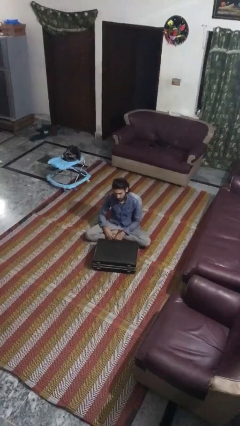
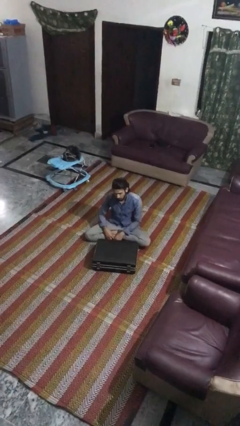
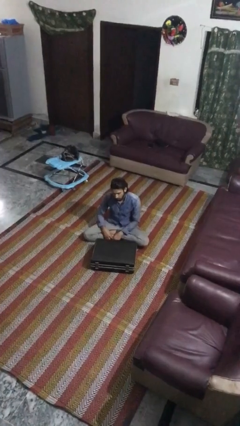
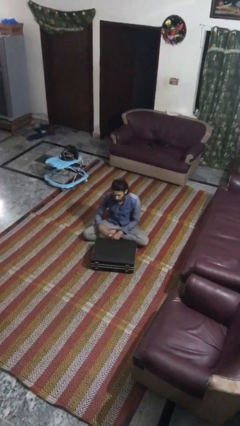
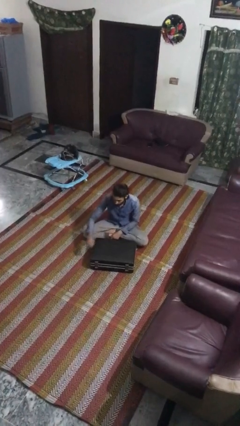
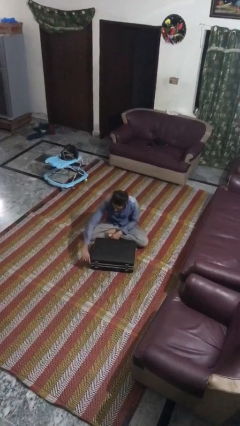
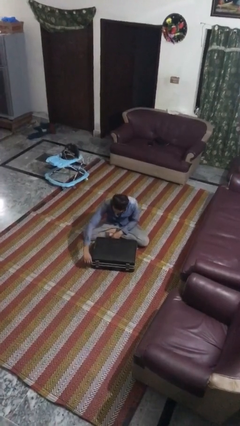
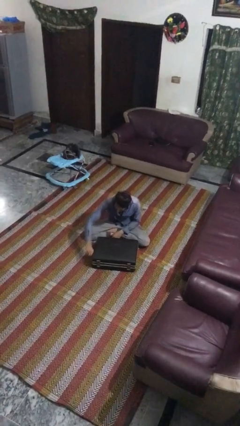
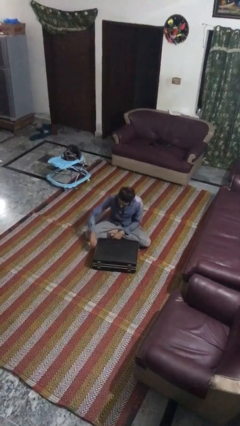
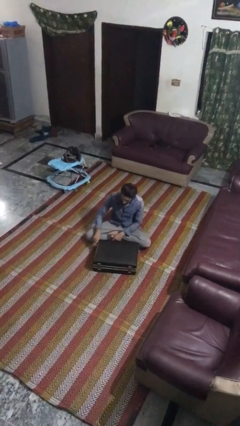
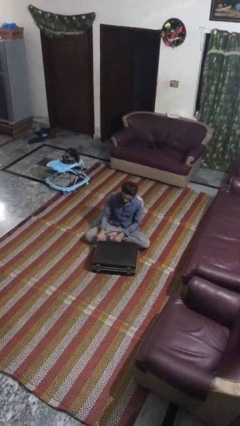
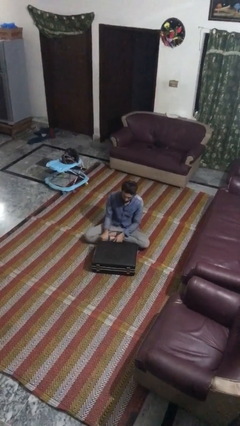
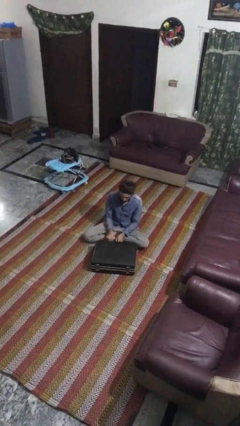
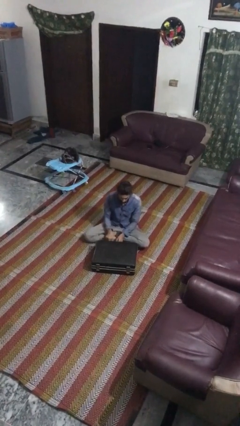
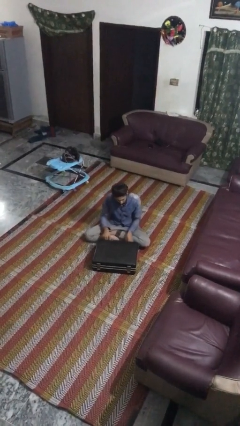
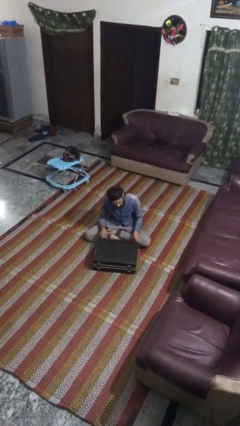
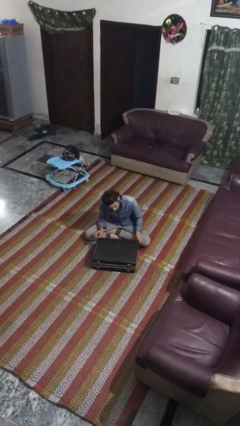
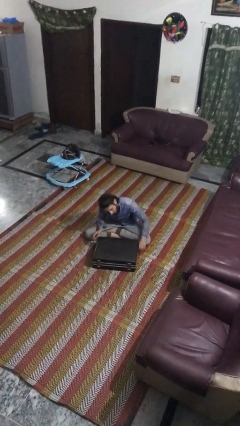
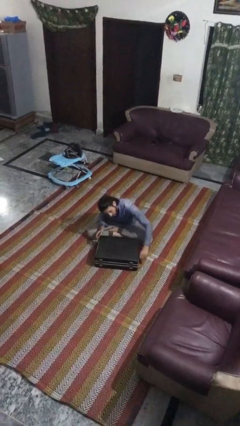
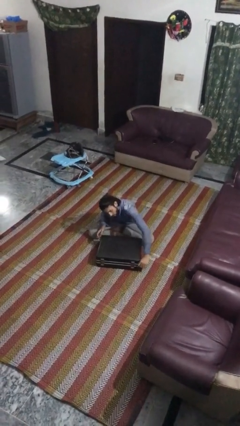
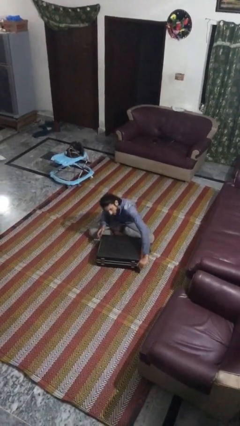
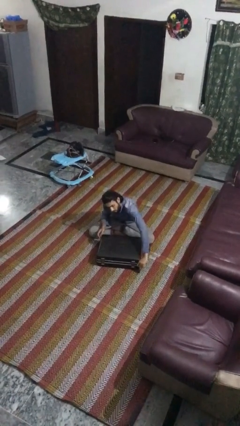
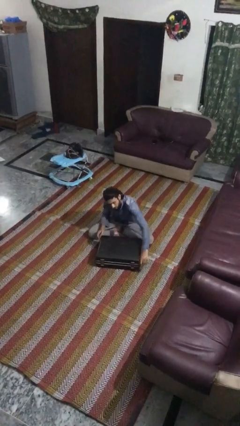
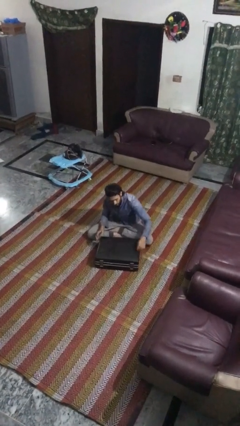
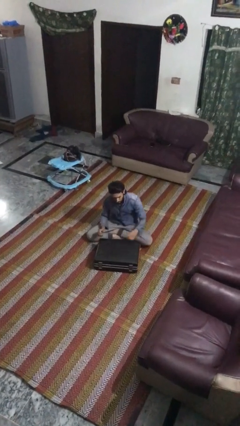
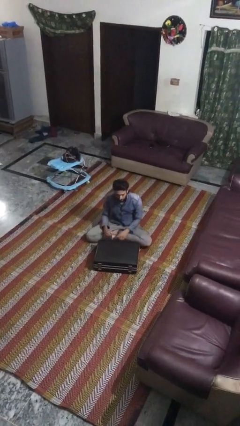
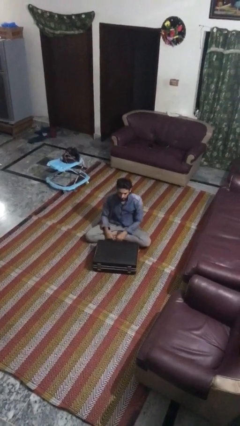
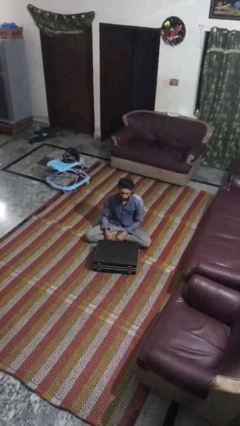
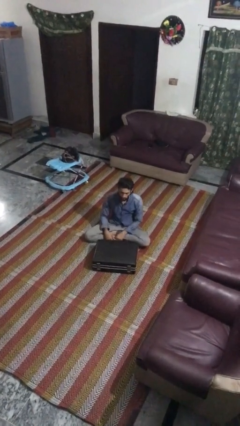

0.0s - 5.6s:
person opens suitcase

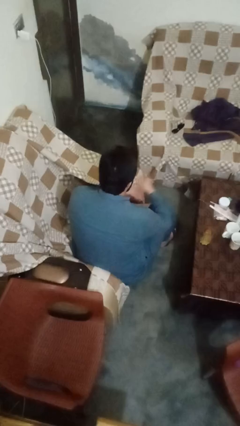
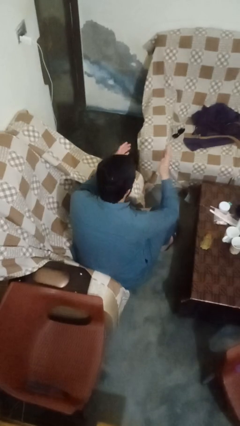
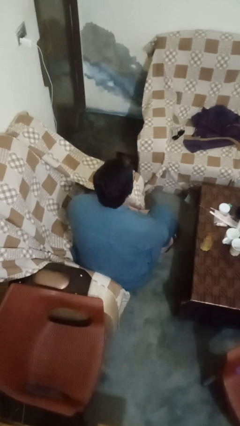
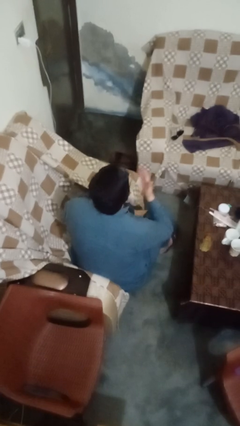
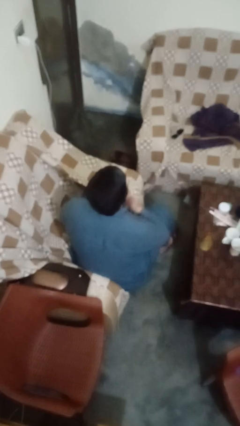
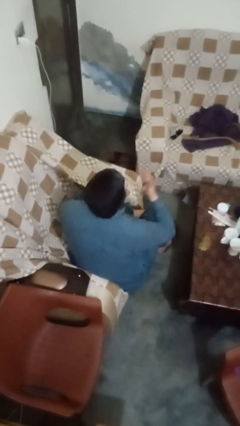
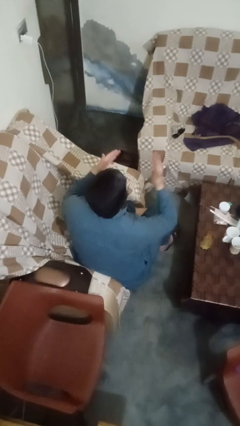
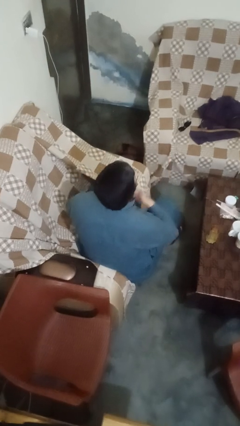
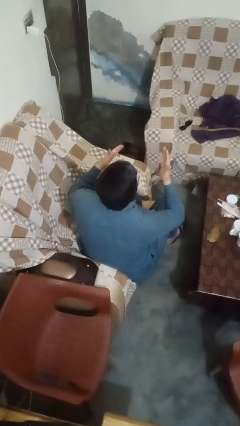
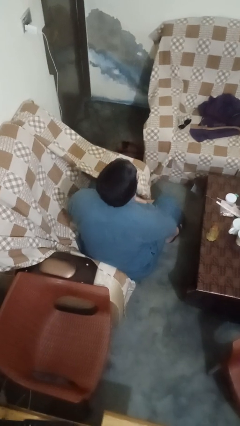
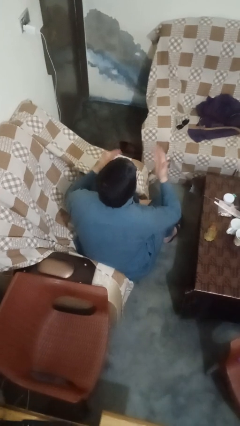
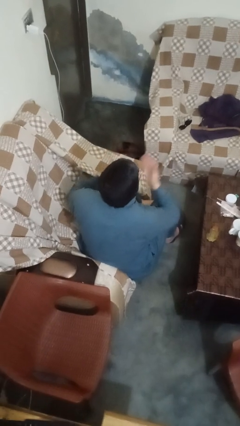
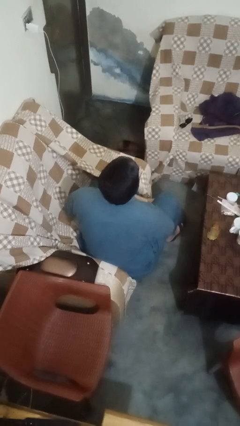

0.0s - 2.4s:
person drums on chest

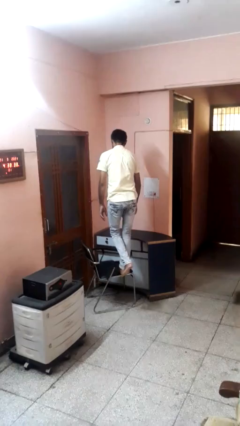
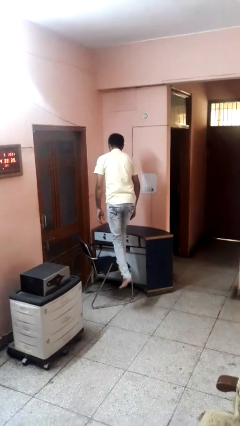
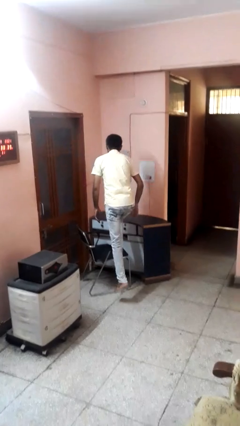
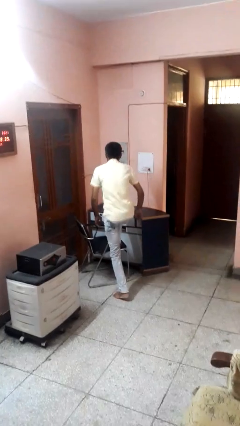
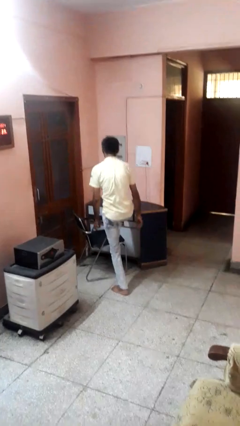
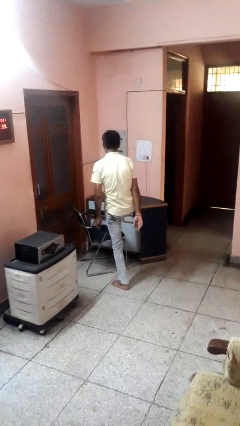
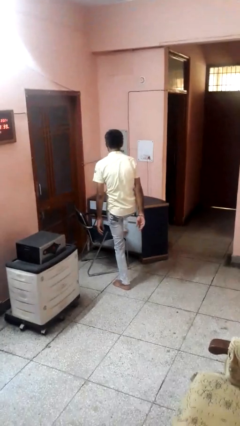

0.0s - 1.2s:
person climbs off chair

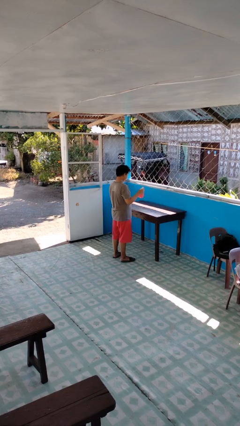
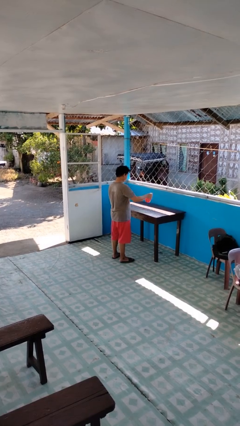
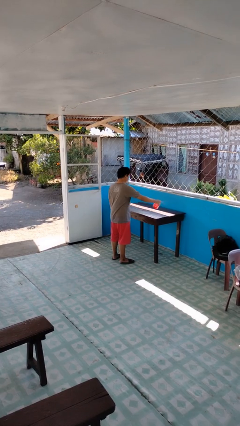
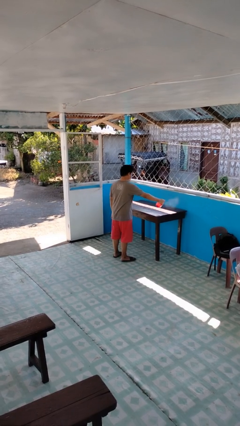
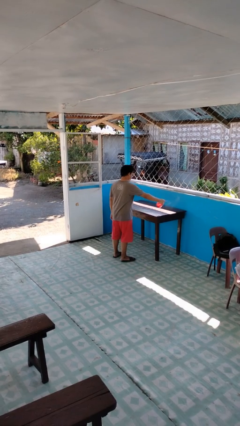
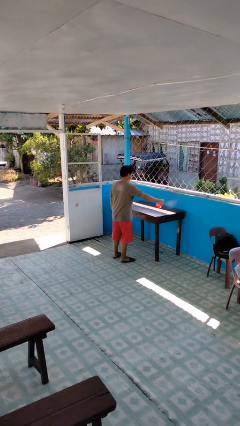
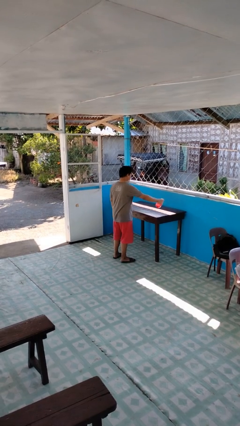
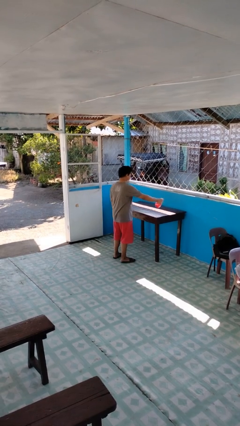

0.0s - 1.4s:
person sprays from bottle

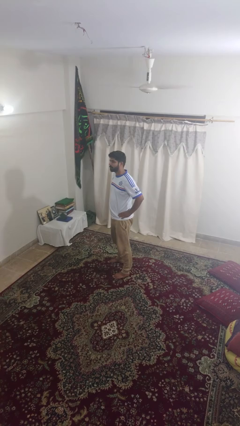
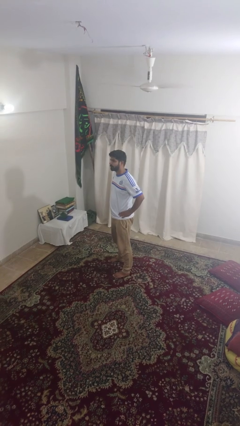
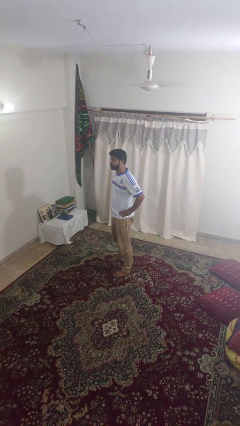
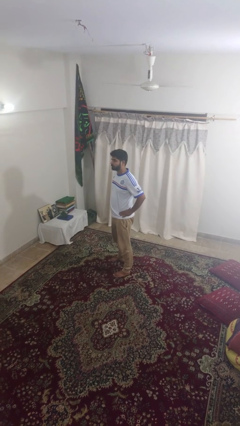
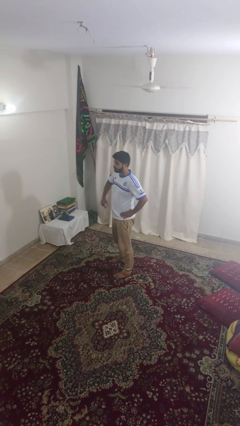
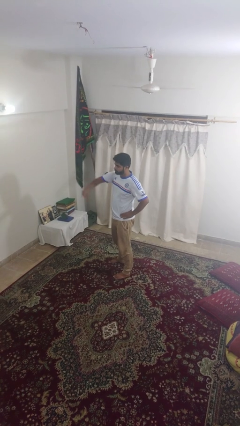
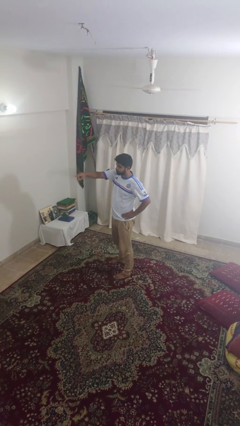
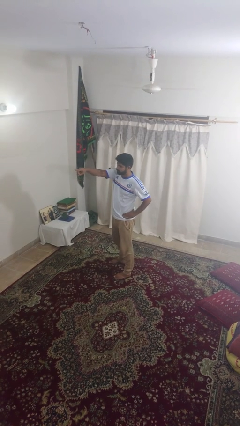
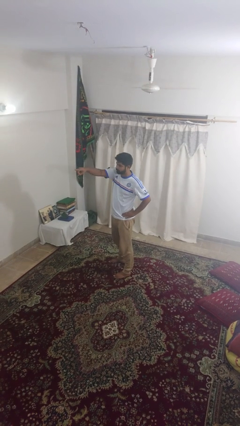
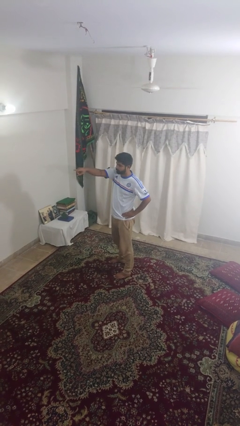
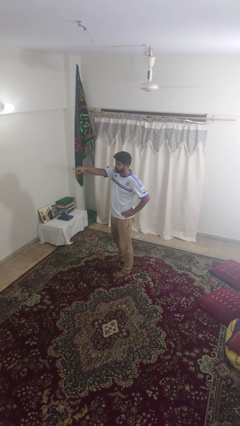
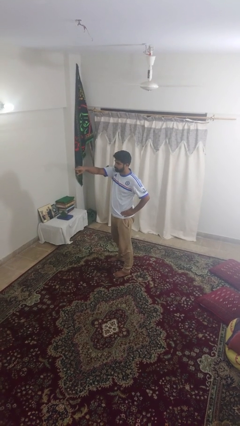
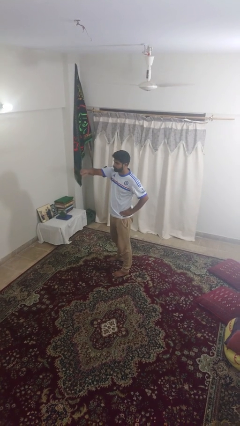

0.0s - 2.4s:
person points at person

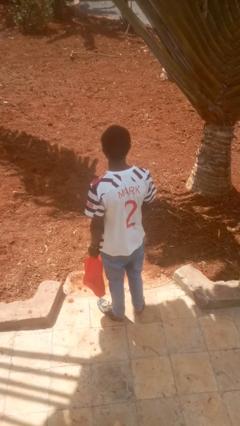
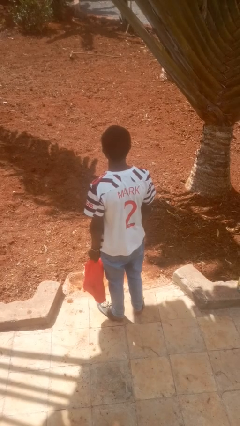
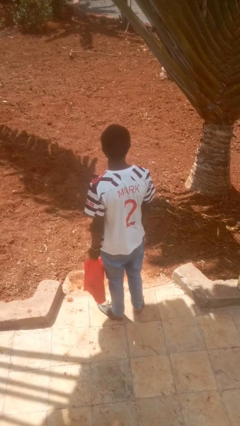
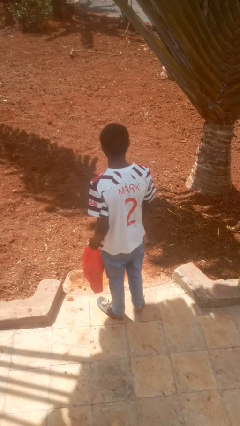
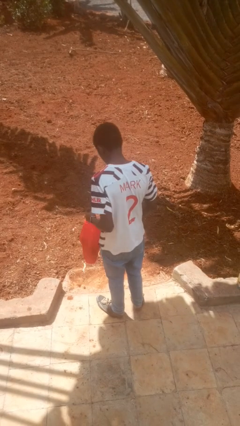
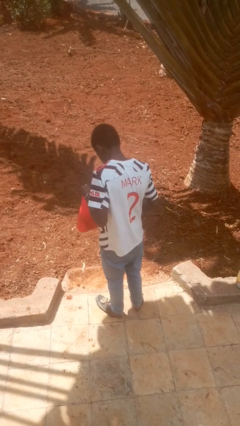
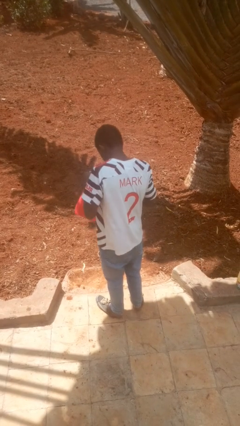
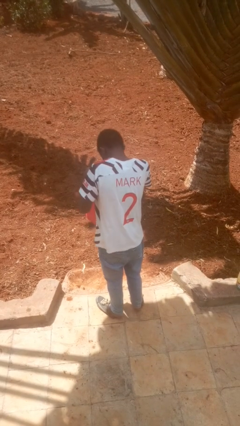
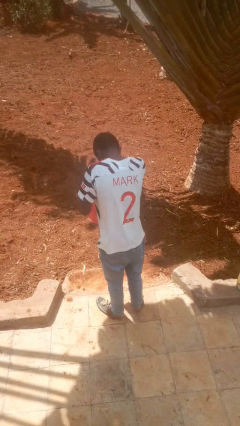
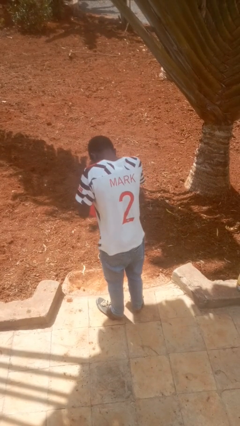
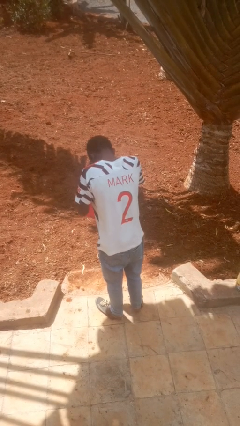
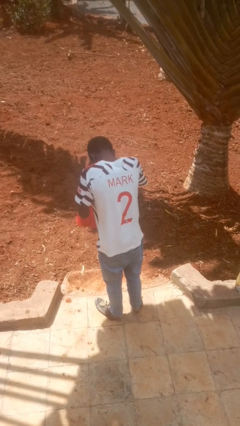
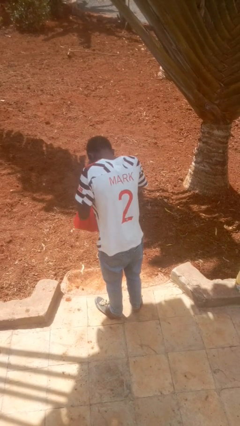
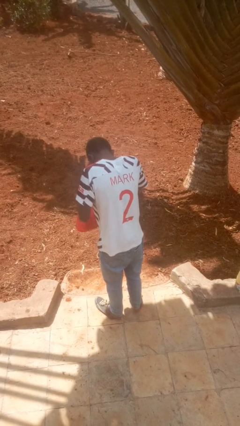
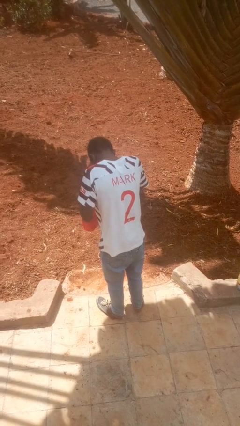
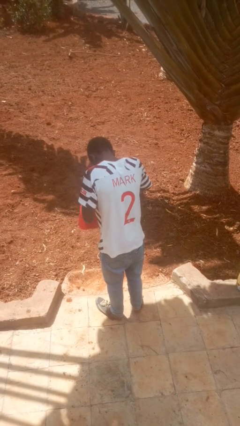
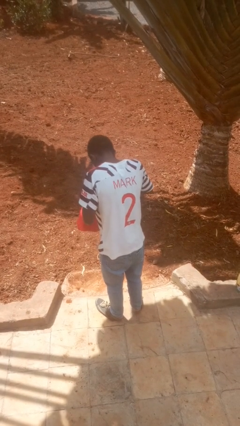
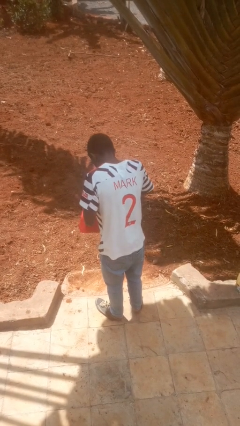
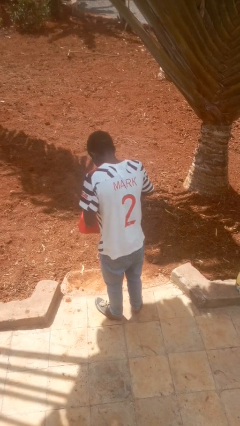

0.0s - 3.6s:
person searches in bag

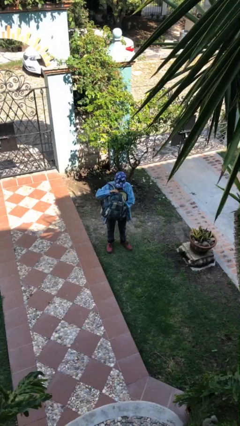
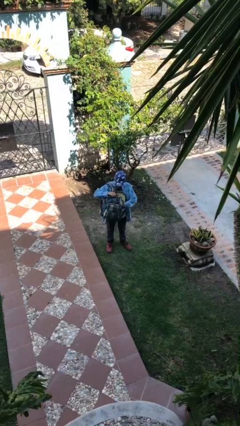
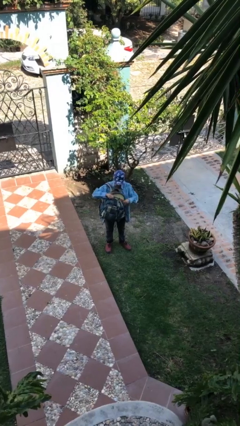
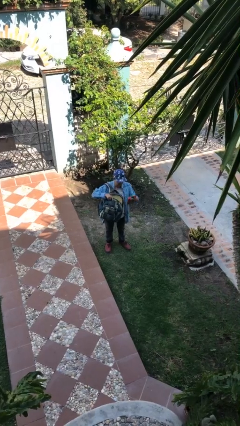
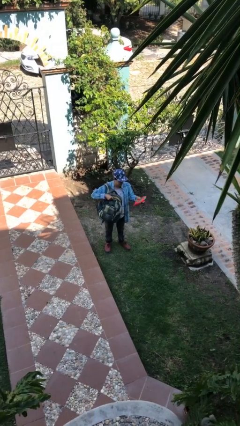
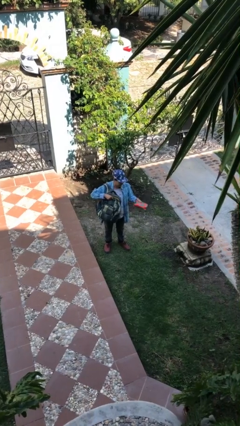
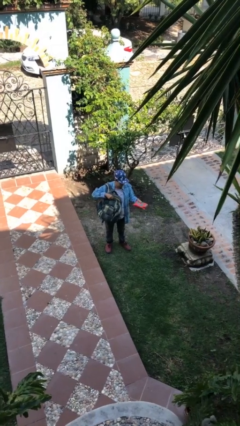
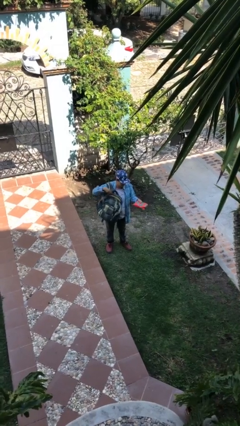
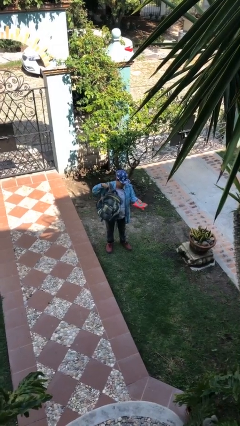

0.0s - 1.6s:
person takes object from backpack
